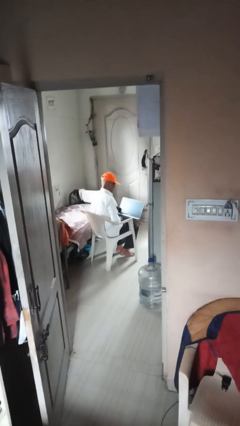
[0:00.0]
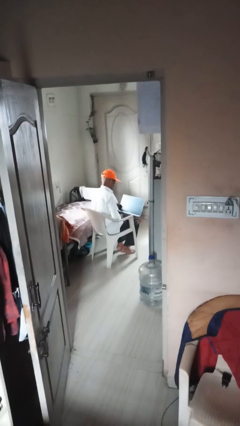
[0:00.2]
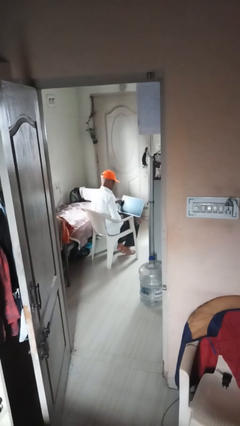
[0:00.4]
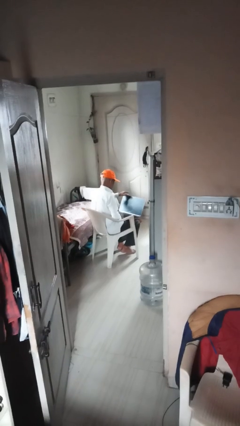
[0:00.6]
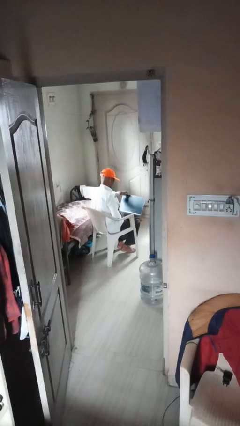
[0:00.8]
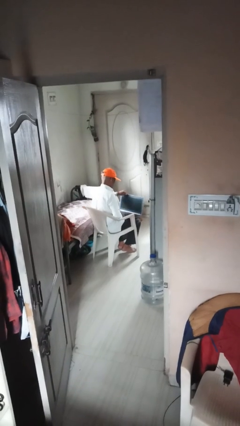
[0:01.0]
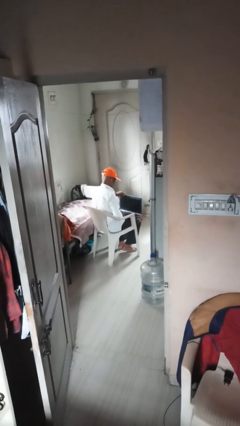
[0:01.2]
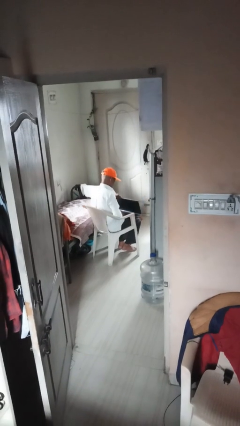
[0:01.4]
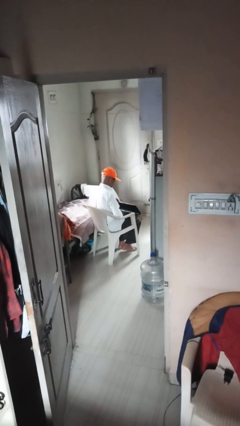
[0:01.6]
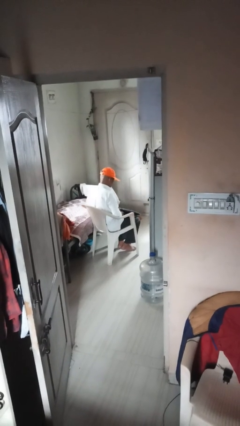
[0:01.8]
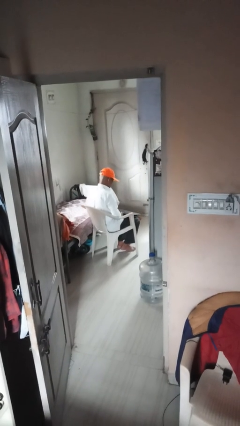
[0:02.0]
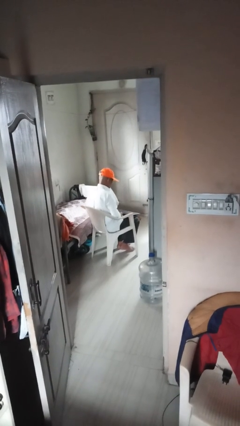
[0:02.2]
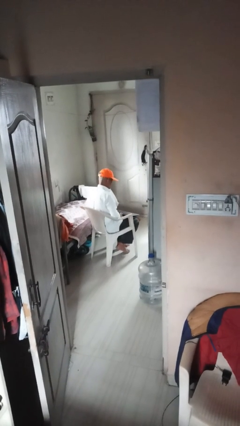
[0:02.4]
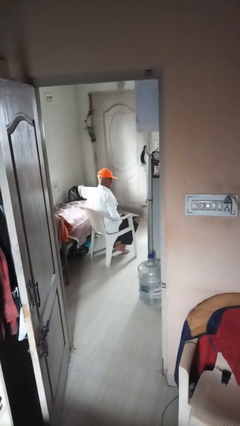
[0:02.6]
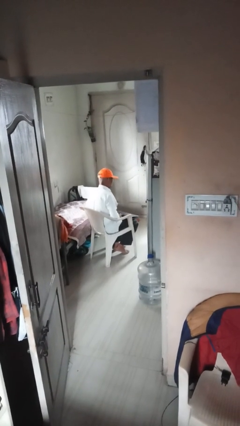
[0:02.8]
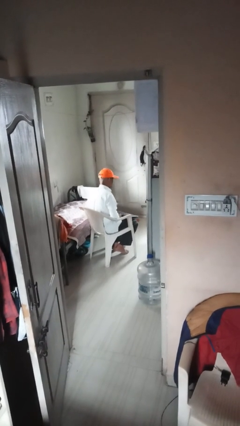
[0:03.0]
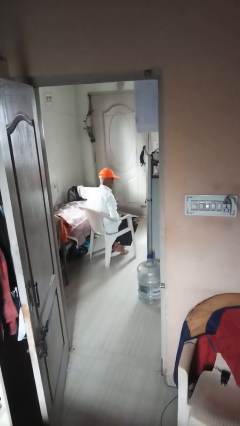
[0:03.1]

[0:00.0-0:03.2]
person closes laptop

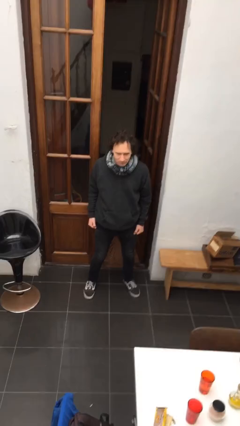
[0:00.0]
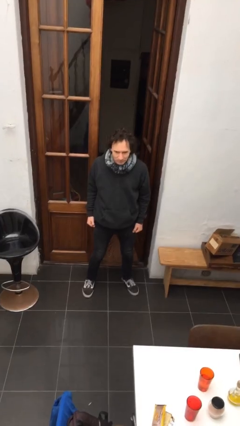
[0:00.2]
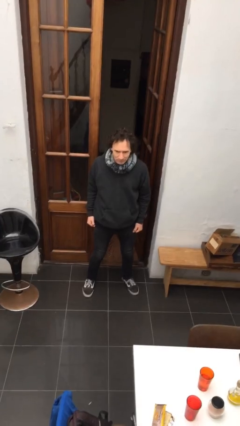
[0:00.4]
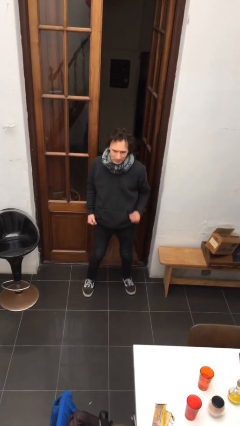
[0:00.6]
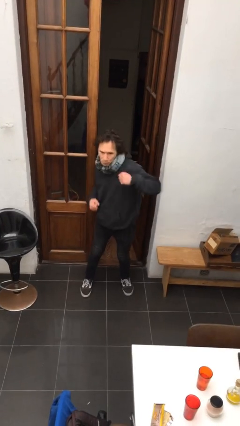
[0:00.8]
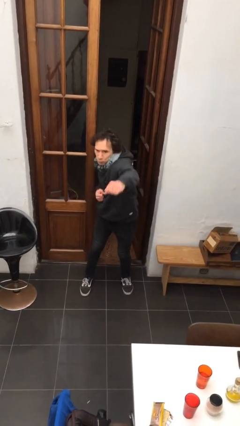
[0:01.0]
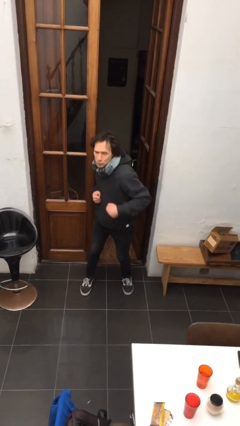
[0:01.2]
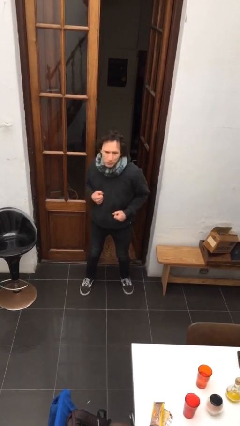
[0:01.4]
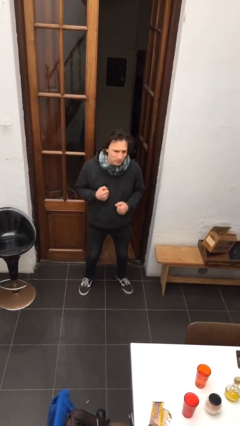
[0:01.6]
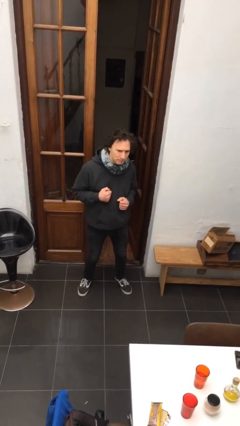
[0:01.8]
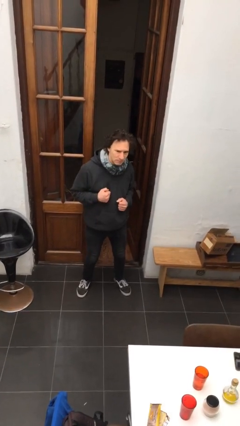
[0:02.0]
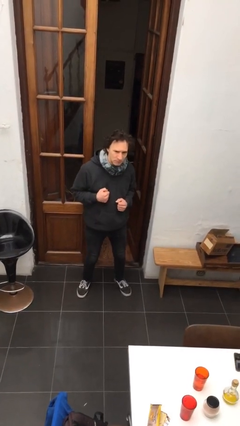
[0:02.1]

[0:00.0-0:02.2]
person punches

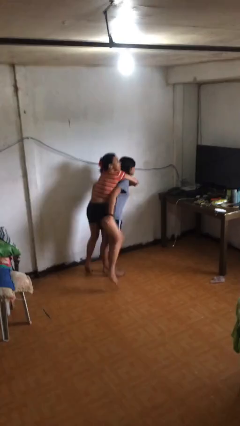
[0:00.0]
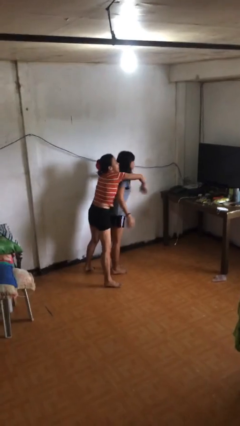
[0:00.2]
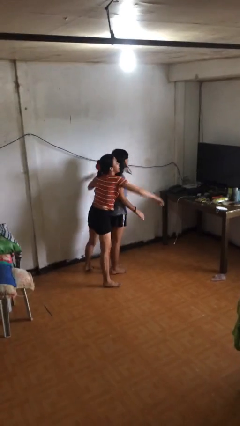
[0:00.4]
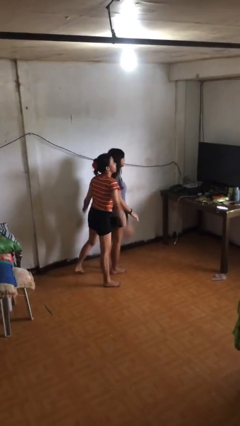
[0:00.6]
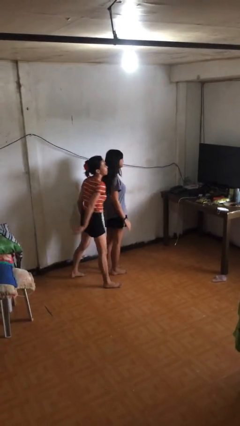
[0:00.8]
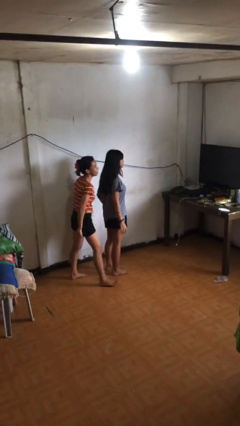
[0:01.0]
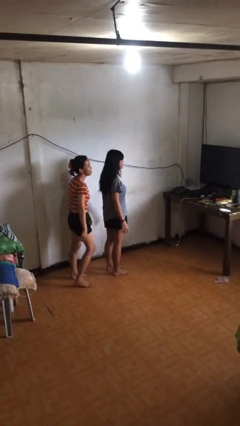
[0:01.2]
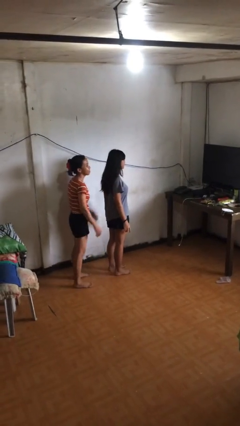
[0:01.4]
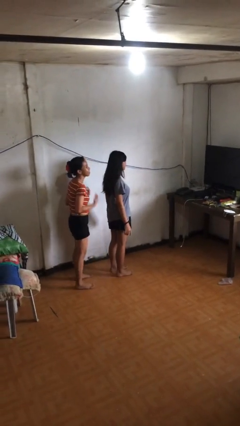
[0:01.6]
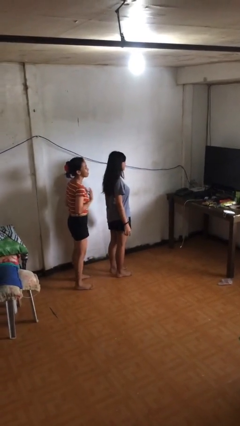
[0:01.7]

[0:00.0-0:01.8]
person puts down person

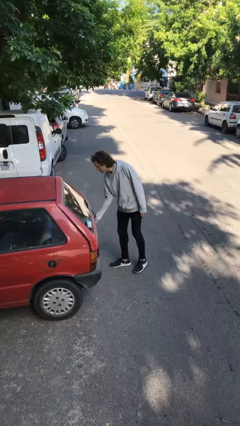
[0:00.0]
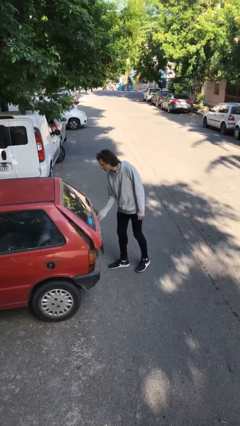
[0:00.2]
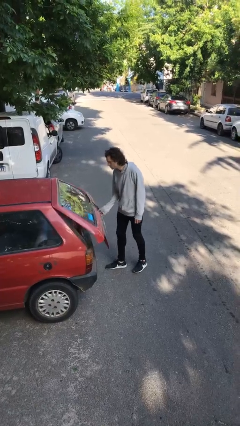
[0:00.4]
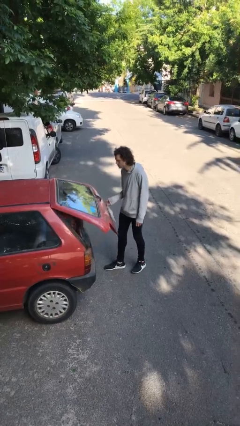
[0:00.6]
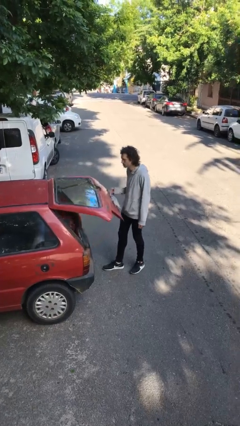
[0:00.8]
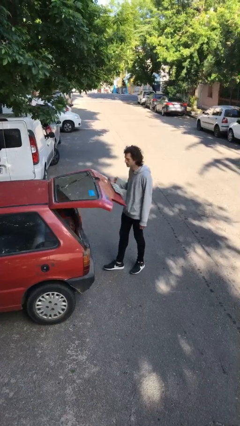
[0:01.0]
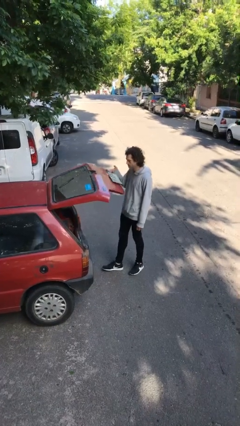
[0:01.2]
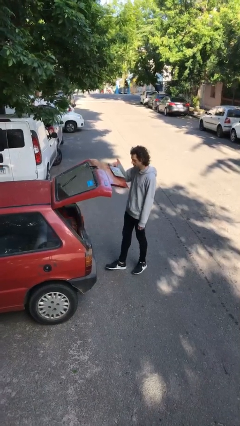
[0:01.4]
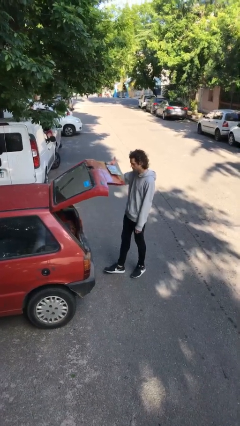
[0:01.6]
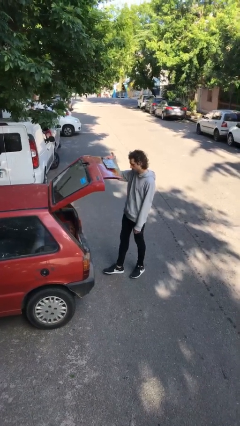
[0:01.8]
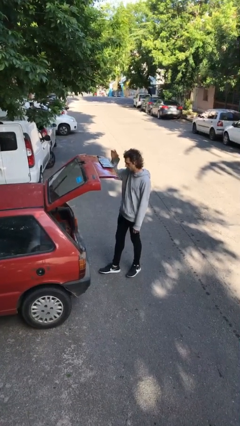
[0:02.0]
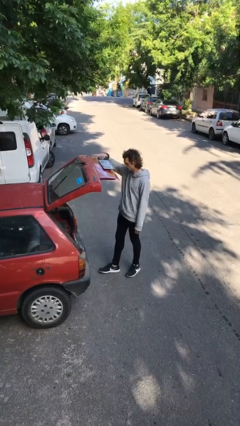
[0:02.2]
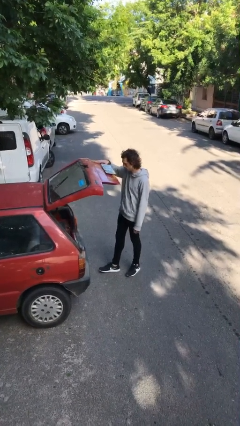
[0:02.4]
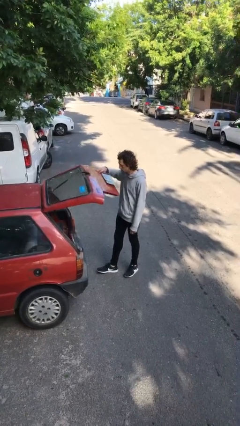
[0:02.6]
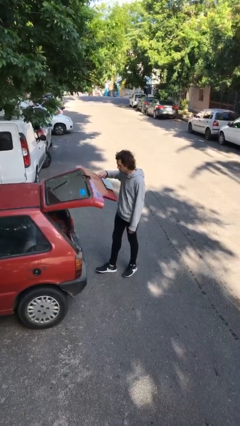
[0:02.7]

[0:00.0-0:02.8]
person opens car trunk

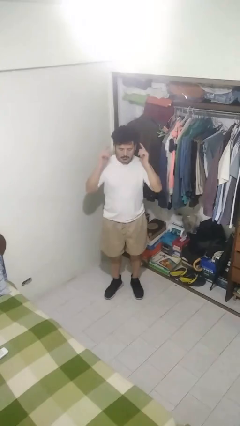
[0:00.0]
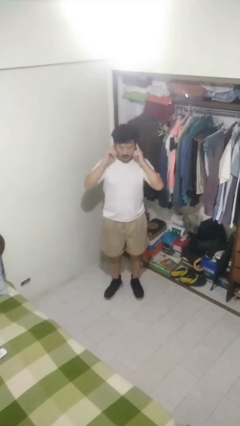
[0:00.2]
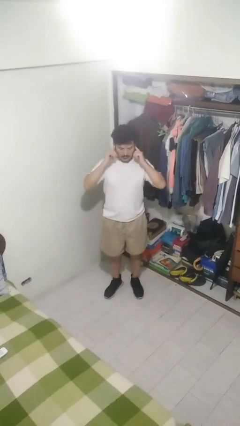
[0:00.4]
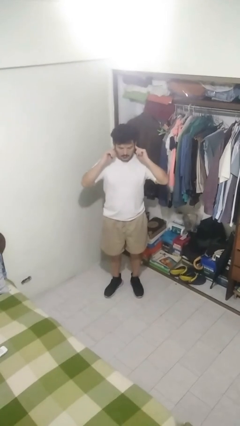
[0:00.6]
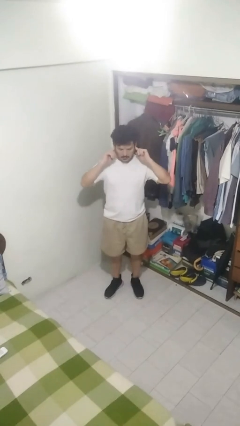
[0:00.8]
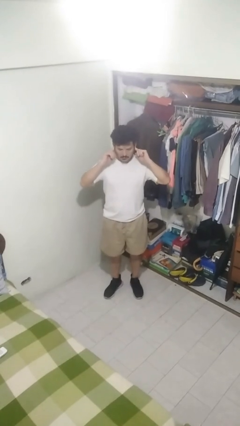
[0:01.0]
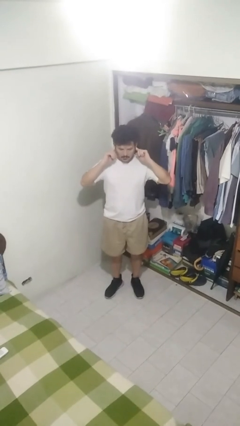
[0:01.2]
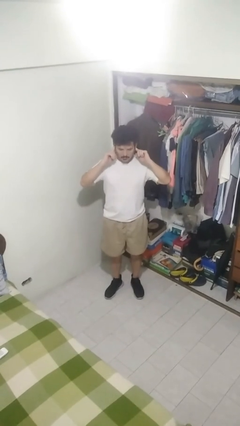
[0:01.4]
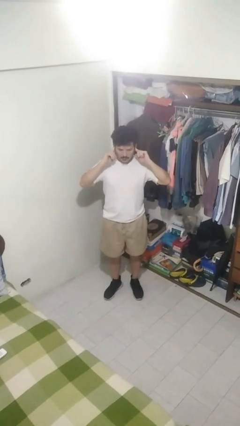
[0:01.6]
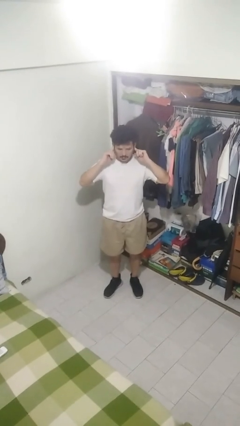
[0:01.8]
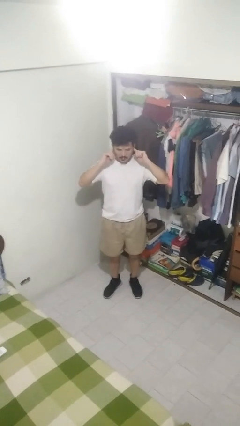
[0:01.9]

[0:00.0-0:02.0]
person puts fingers in ear

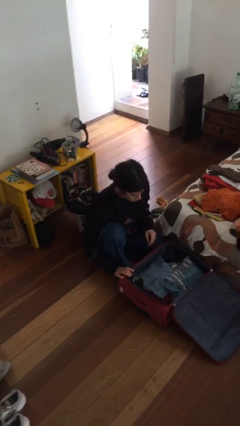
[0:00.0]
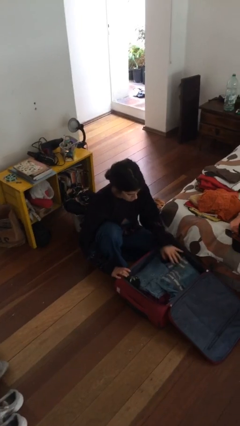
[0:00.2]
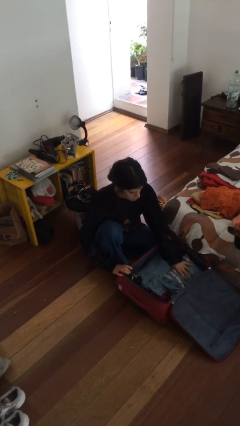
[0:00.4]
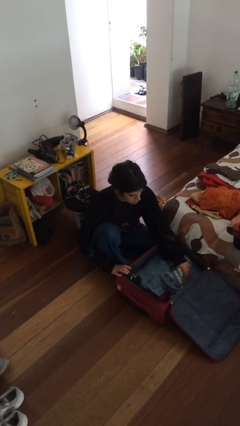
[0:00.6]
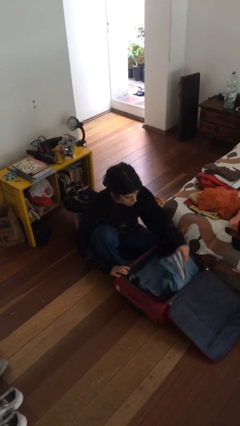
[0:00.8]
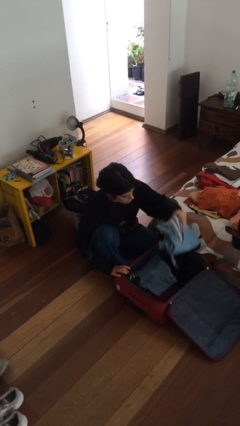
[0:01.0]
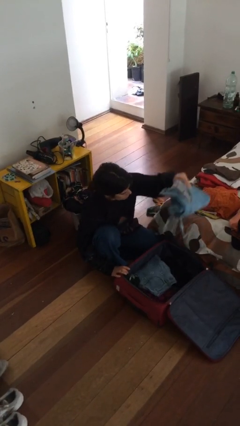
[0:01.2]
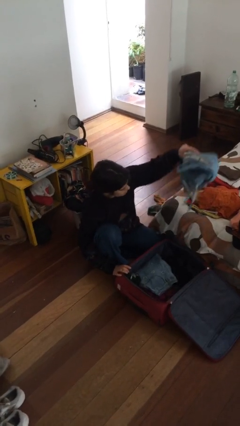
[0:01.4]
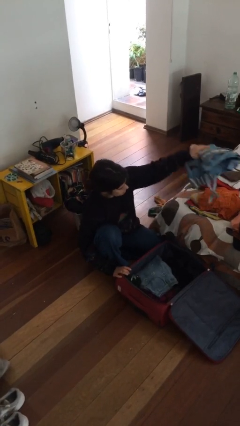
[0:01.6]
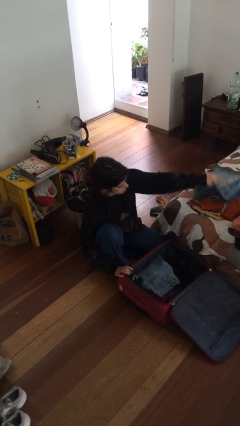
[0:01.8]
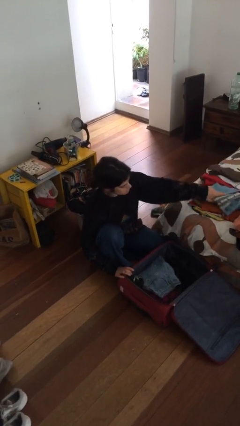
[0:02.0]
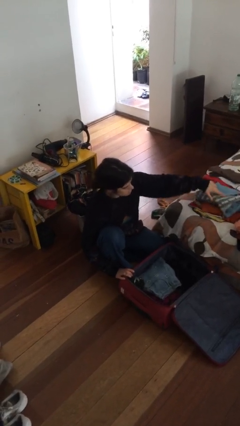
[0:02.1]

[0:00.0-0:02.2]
person unloads clothes from suitcase

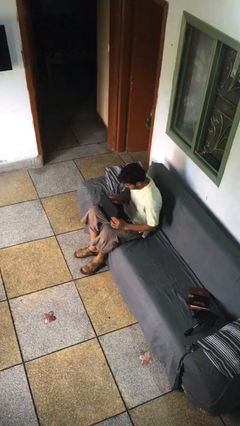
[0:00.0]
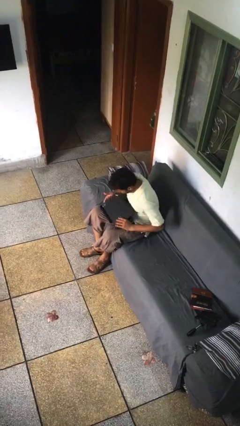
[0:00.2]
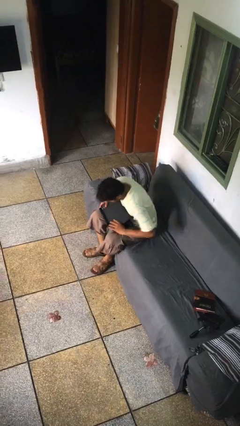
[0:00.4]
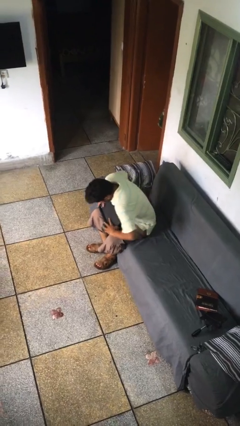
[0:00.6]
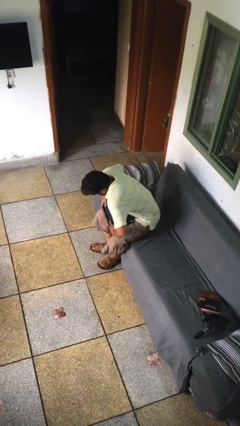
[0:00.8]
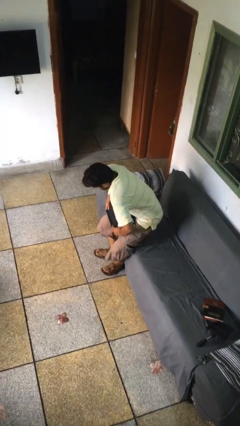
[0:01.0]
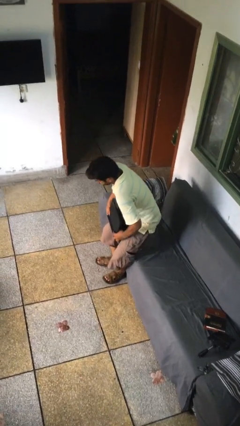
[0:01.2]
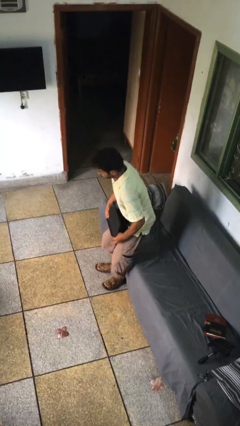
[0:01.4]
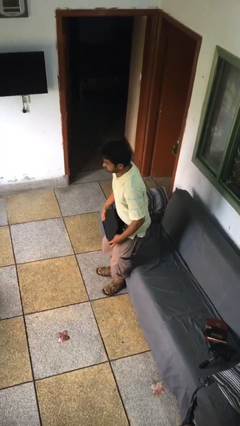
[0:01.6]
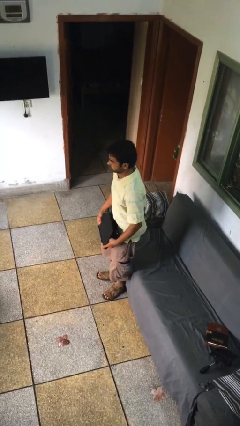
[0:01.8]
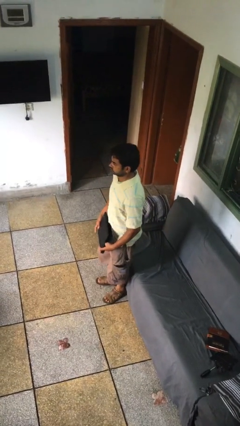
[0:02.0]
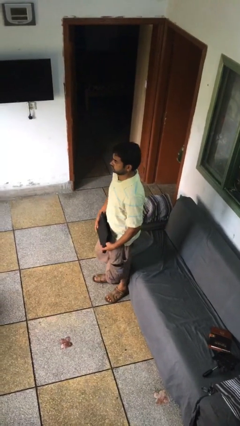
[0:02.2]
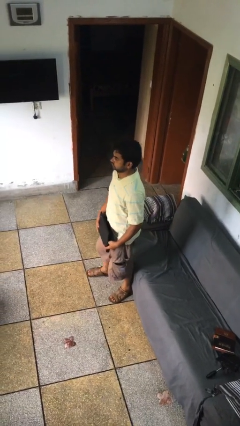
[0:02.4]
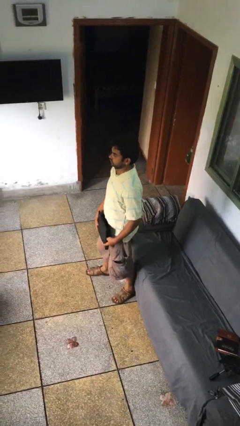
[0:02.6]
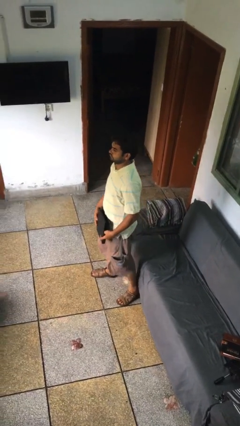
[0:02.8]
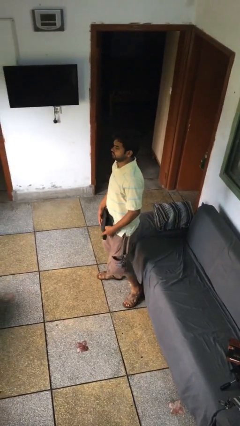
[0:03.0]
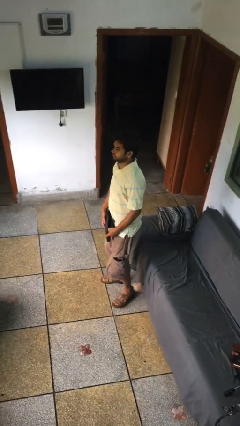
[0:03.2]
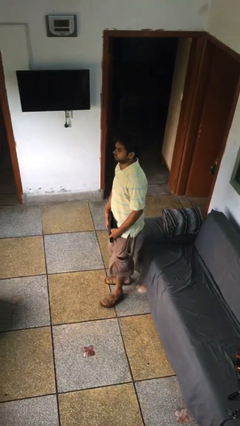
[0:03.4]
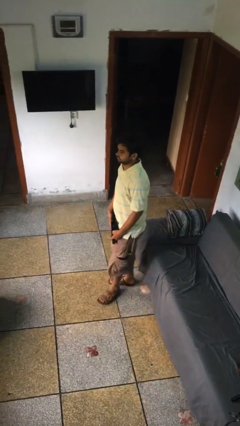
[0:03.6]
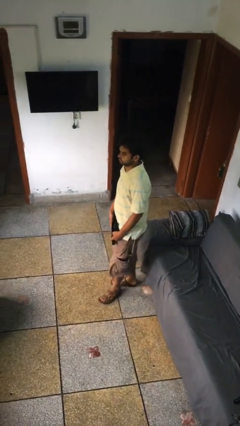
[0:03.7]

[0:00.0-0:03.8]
person stands up
